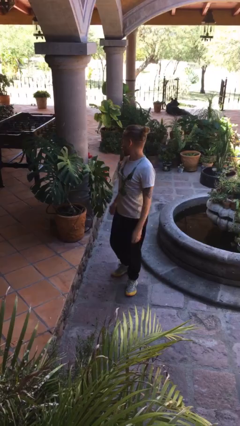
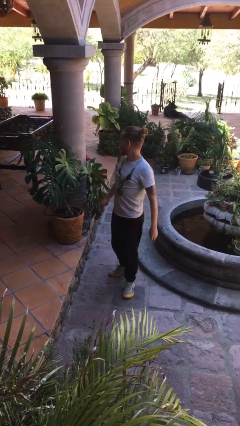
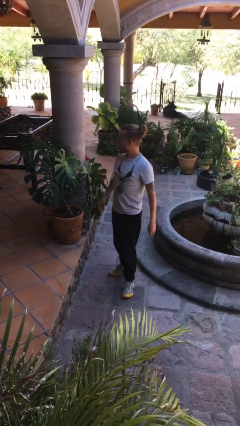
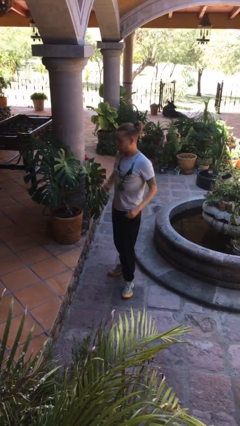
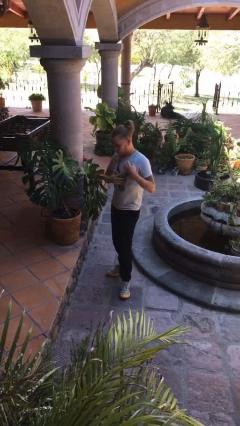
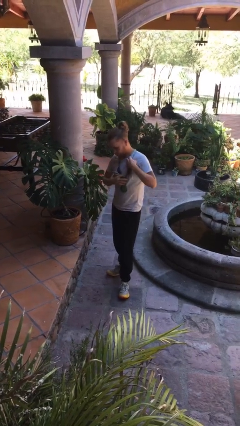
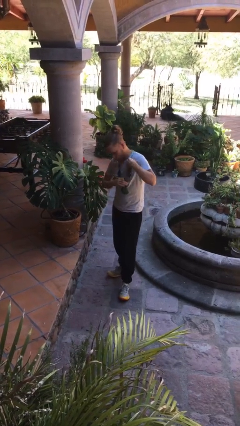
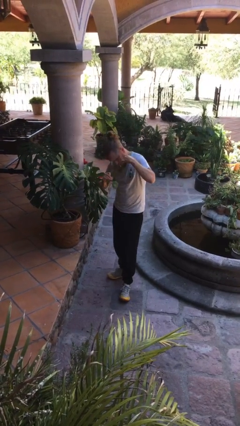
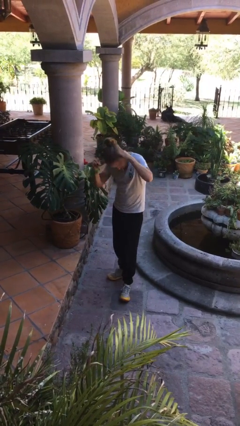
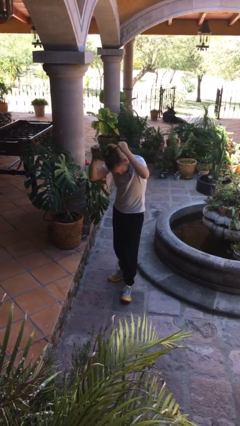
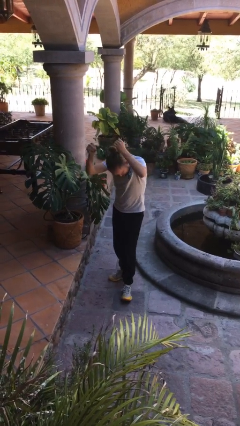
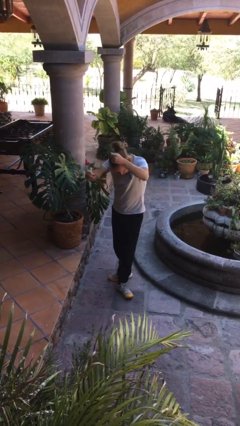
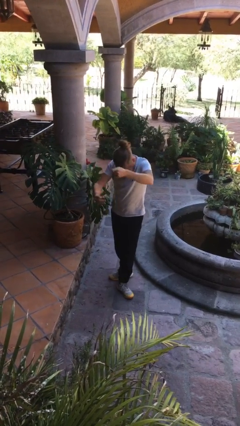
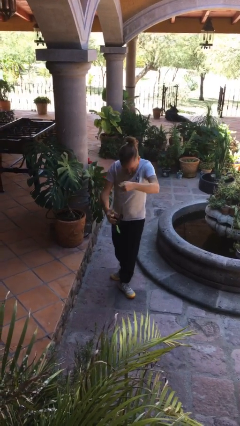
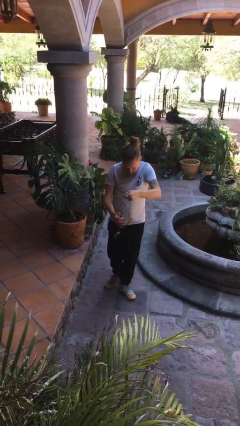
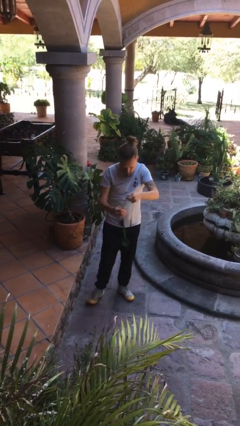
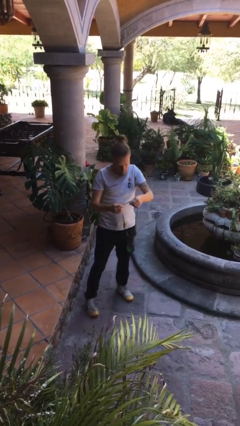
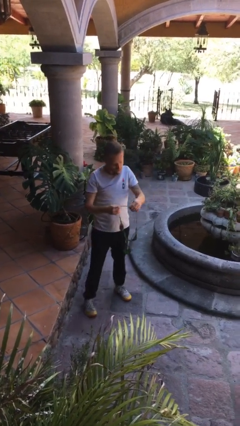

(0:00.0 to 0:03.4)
person takes off necklace

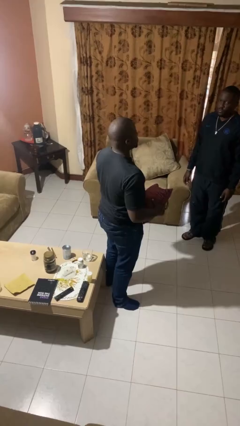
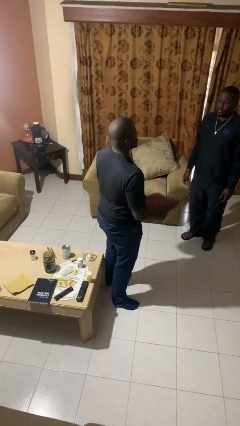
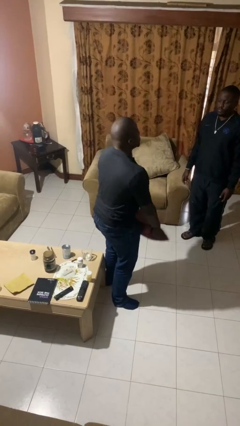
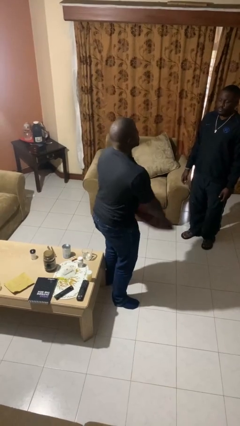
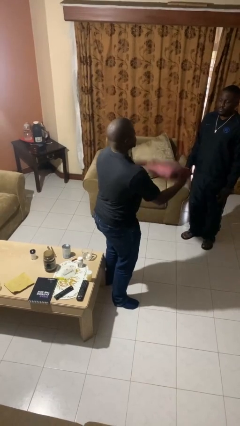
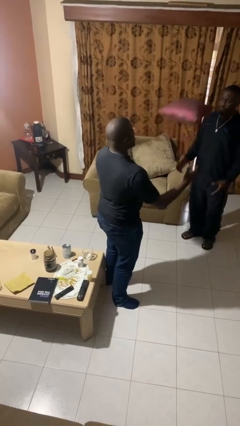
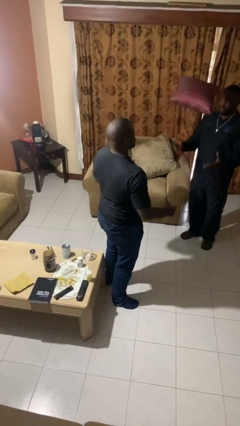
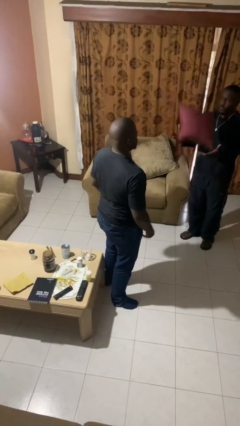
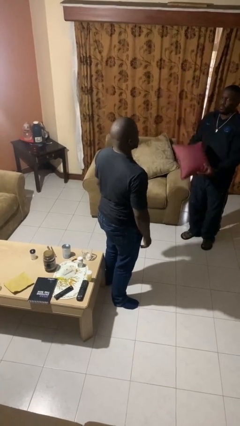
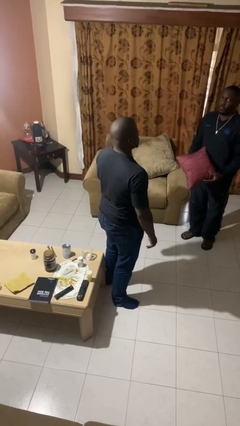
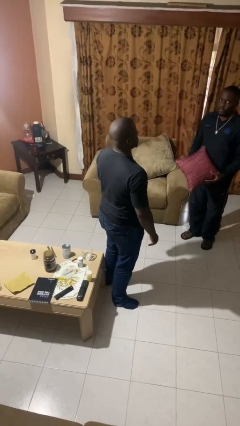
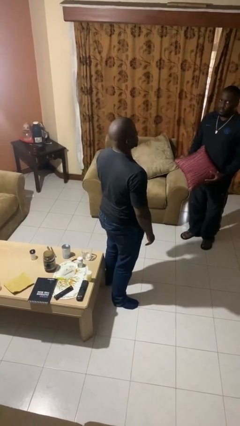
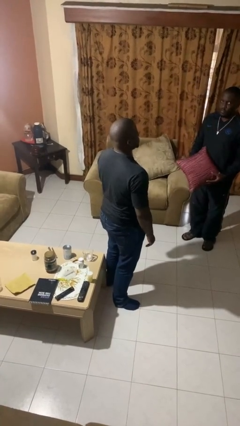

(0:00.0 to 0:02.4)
person throws object to person

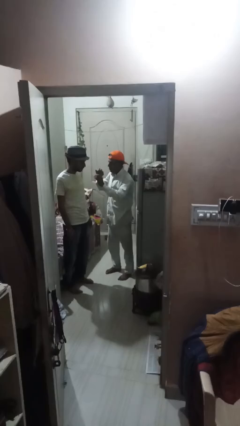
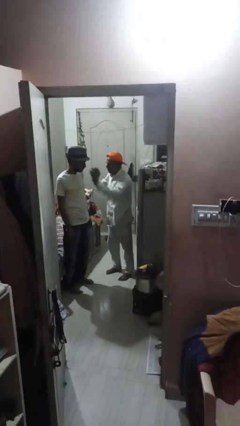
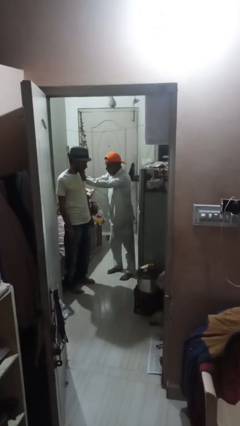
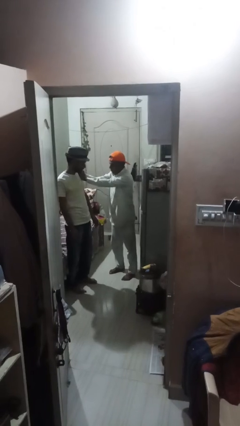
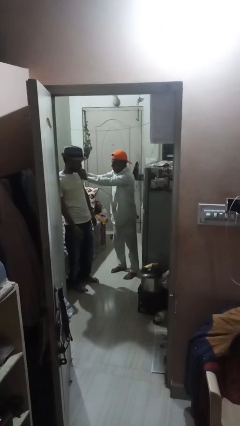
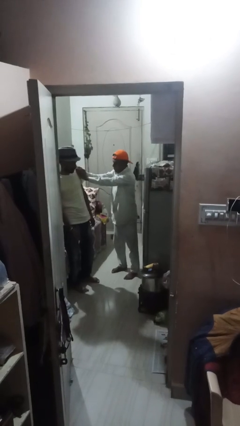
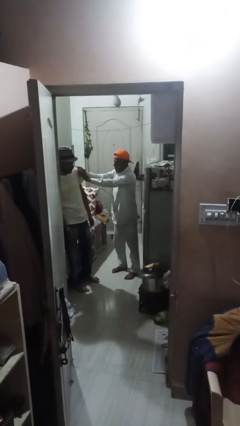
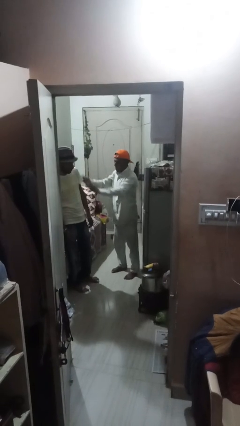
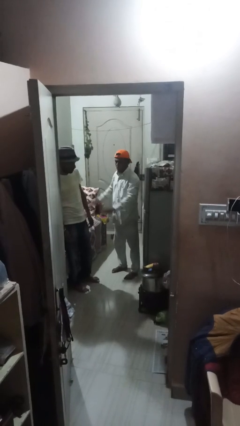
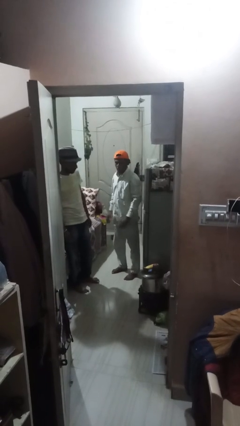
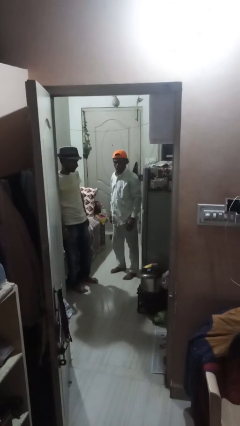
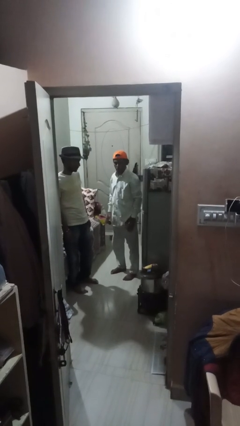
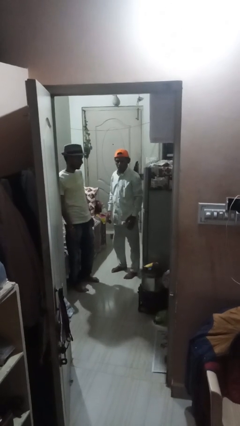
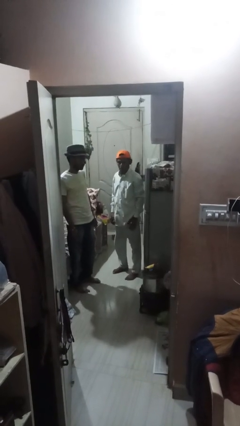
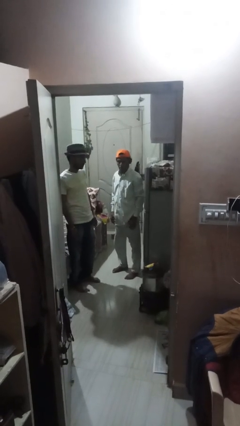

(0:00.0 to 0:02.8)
person shoves person

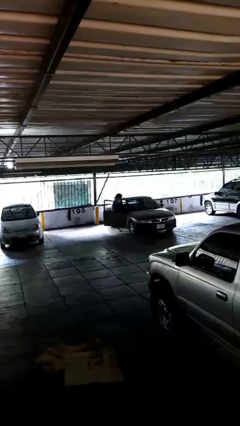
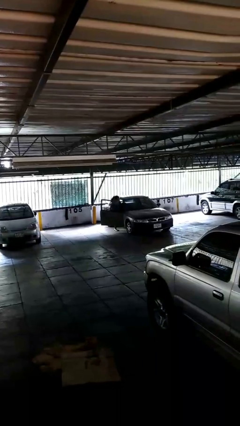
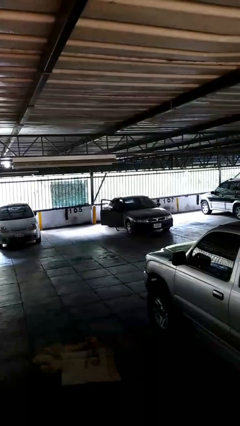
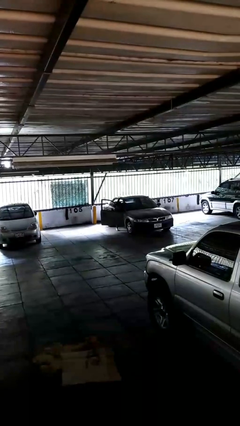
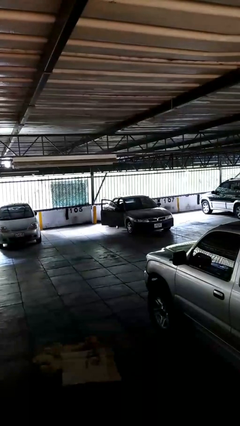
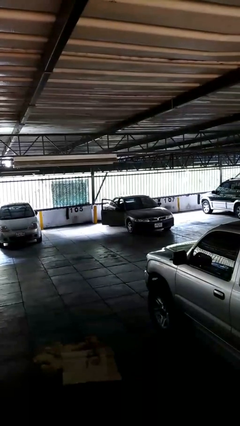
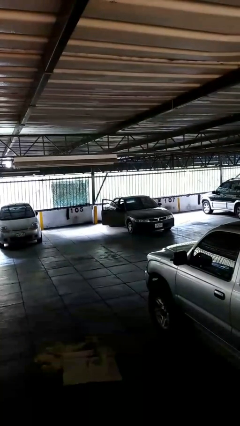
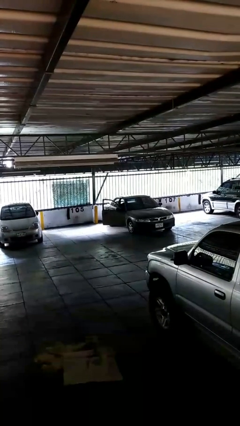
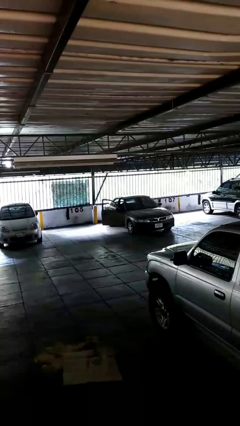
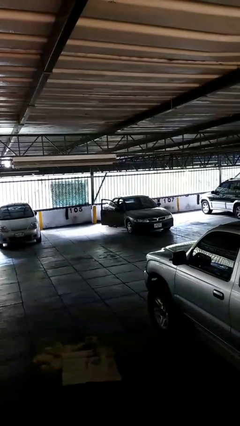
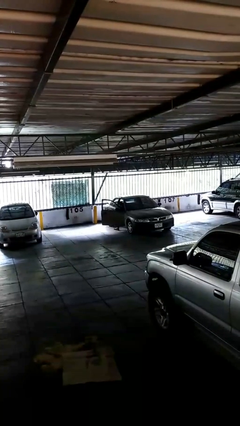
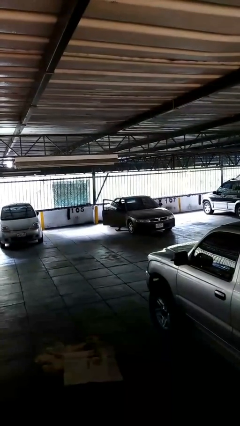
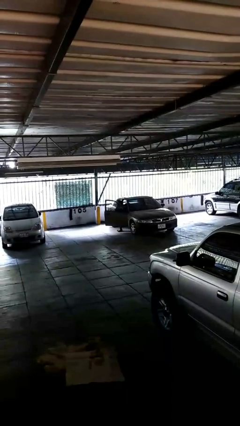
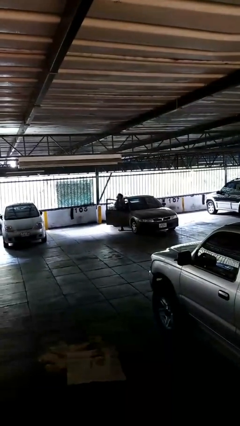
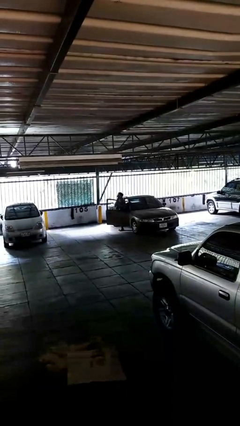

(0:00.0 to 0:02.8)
person enters car

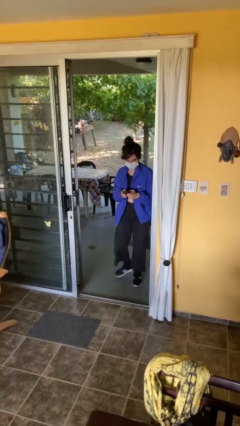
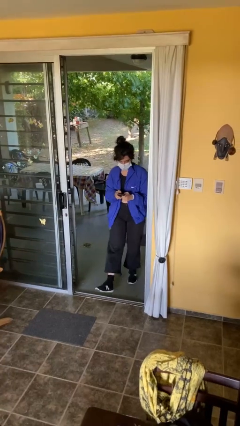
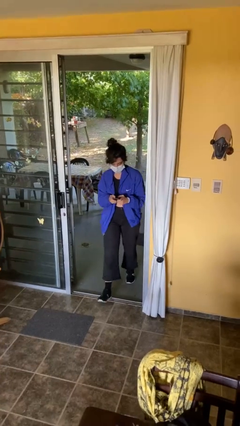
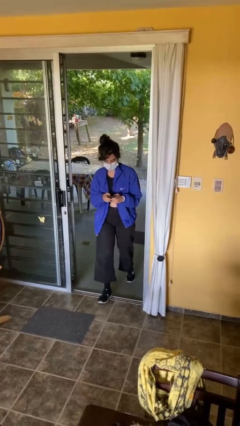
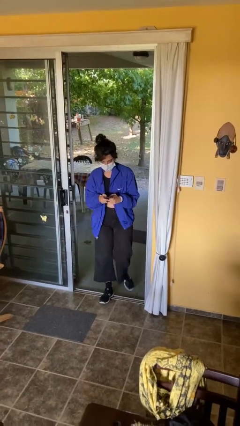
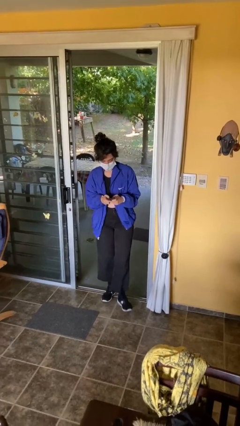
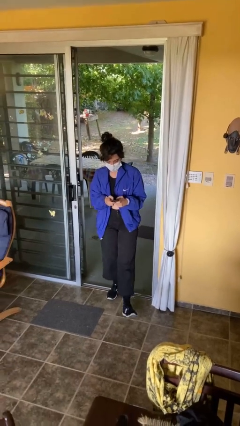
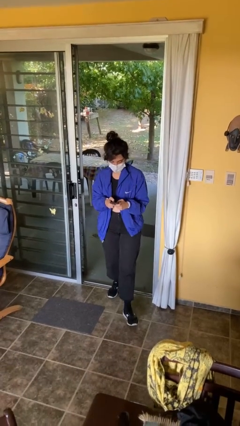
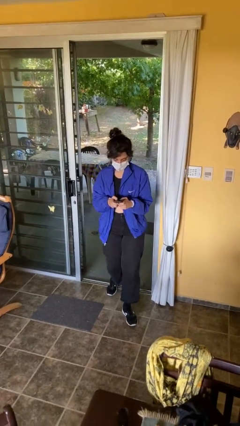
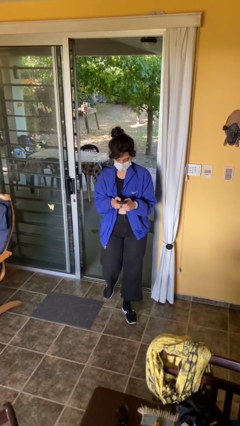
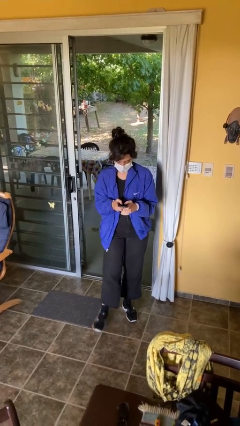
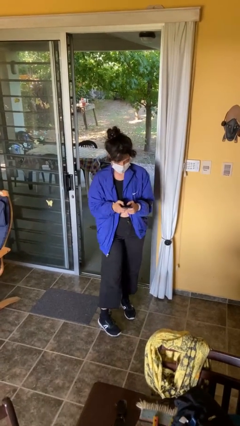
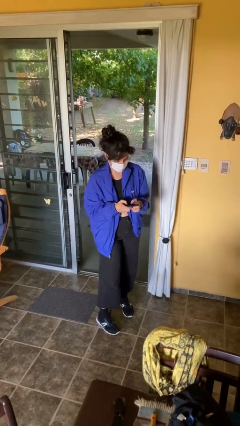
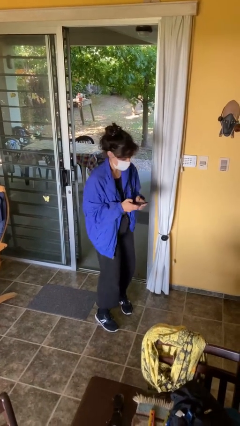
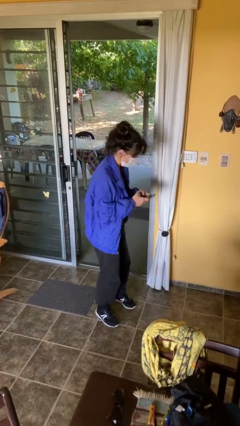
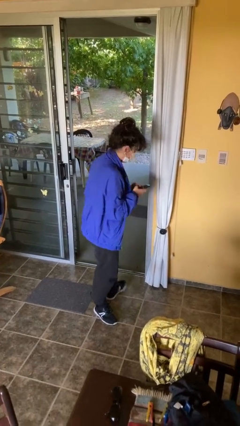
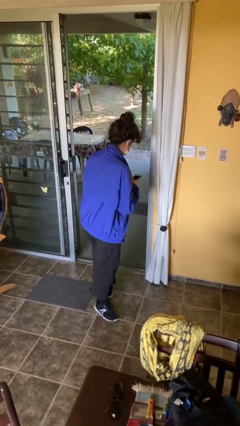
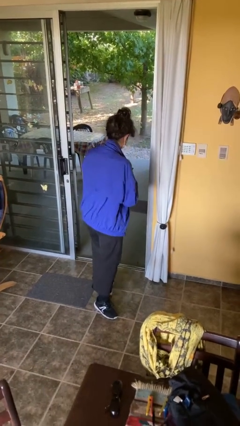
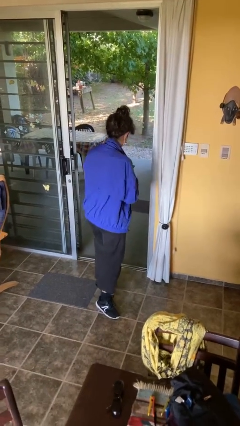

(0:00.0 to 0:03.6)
person enters scene through structure

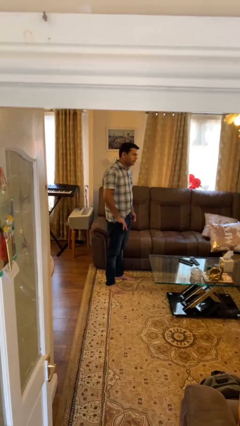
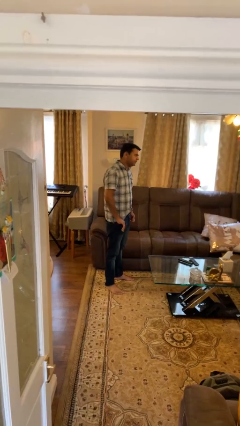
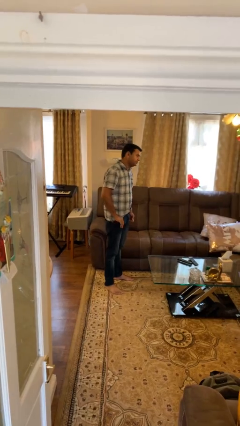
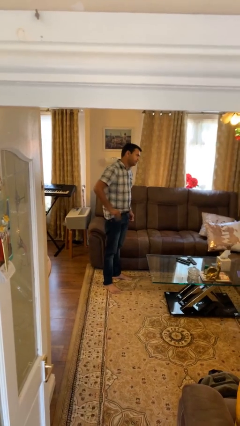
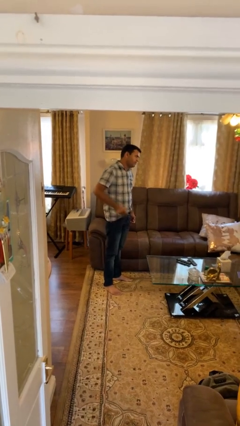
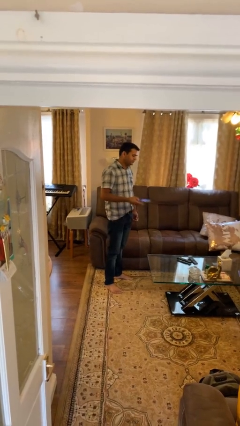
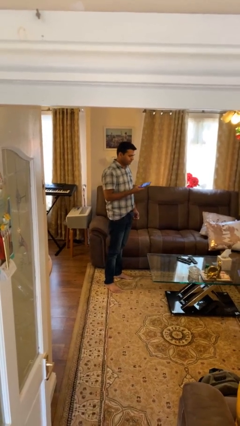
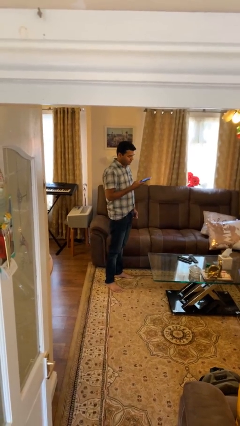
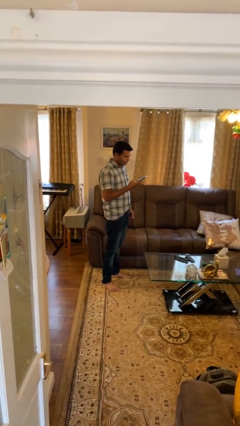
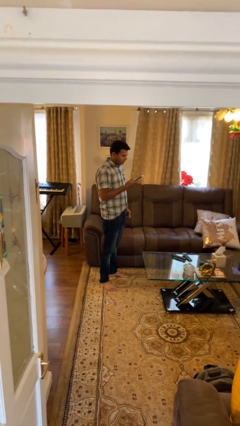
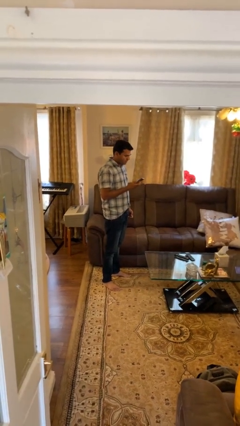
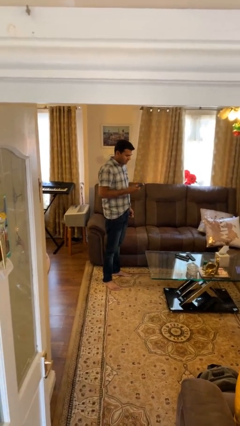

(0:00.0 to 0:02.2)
person takes phone from pocket
